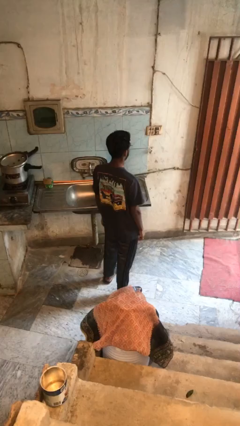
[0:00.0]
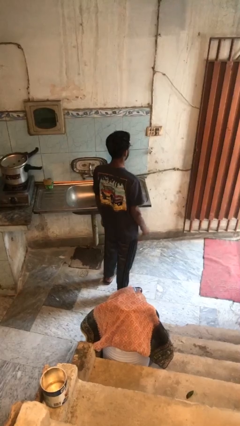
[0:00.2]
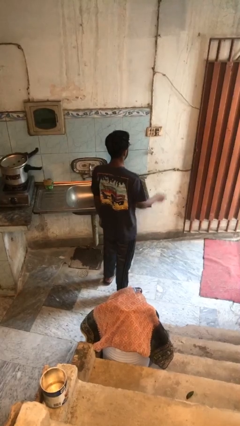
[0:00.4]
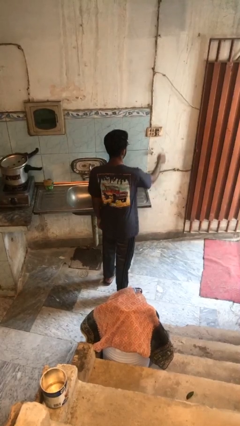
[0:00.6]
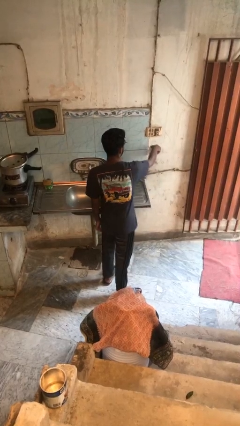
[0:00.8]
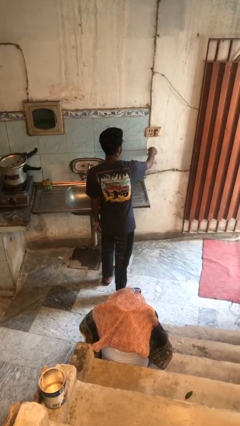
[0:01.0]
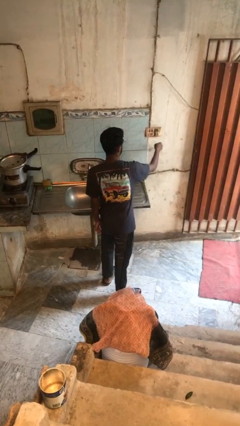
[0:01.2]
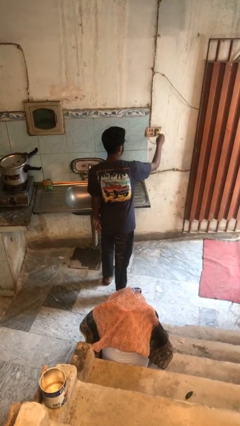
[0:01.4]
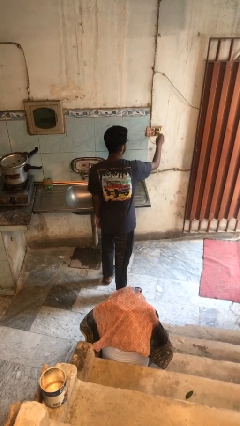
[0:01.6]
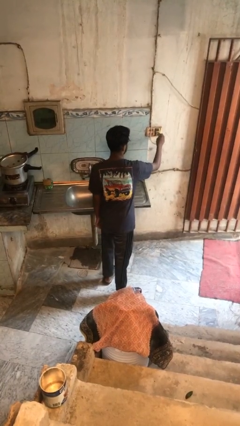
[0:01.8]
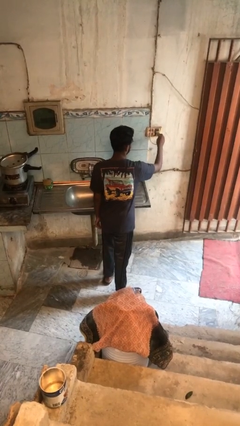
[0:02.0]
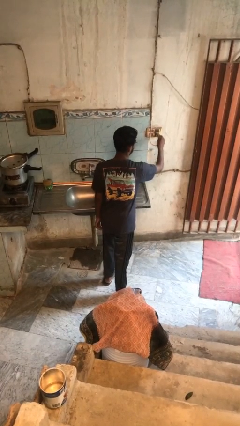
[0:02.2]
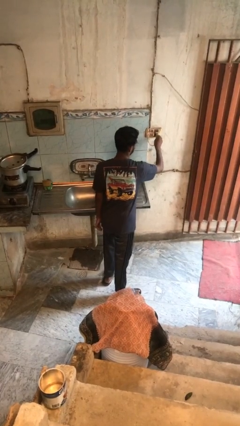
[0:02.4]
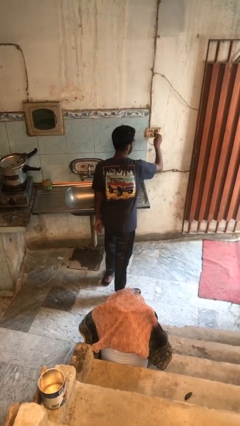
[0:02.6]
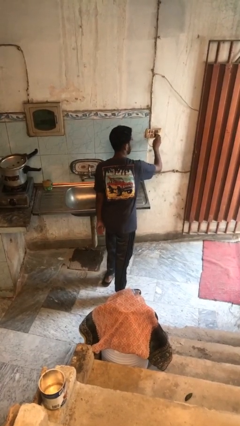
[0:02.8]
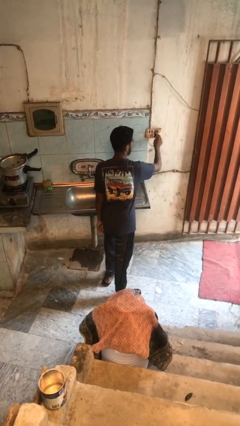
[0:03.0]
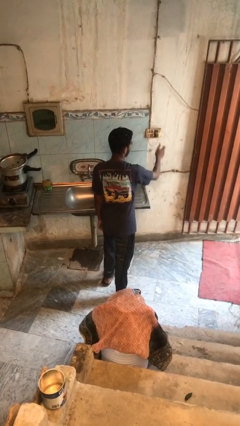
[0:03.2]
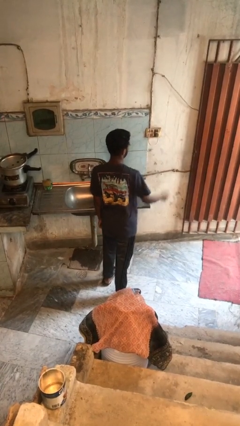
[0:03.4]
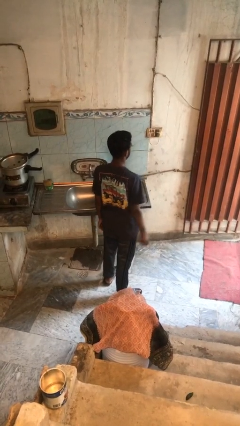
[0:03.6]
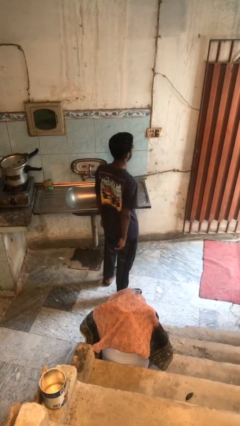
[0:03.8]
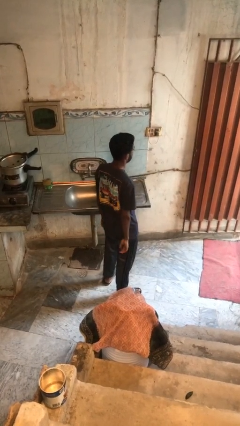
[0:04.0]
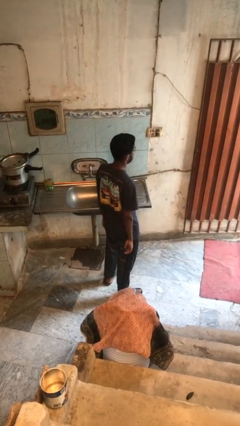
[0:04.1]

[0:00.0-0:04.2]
person plugs into electrical socket

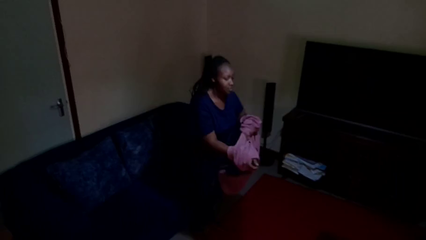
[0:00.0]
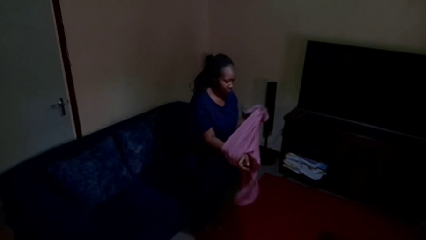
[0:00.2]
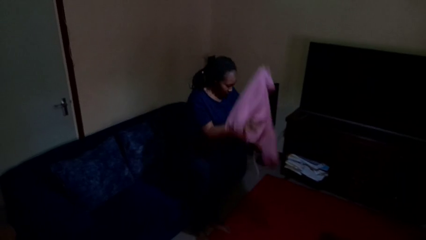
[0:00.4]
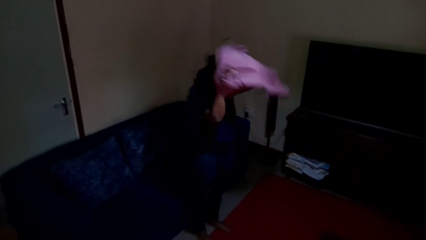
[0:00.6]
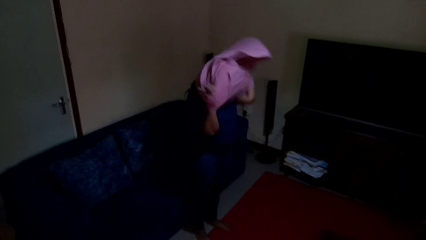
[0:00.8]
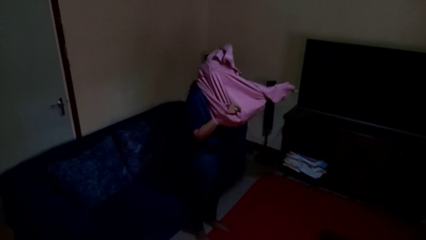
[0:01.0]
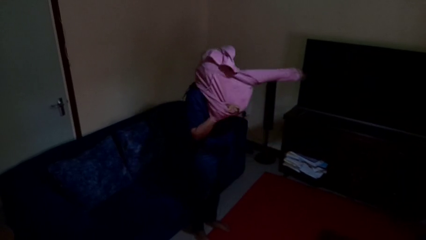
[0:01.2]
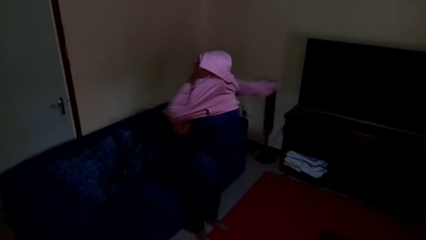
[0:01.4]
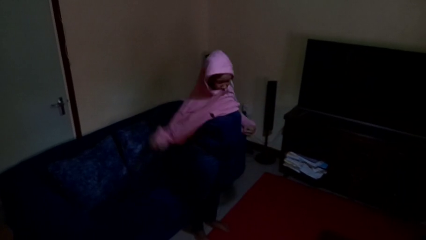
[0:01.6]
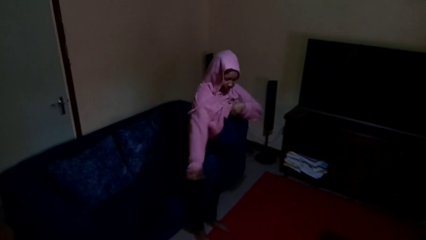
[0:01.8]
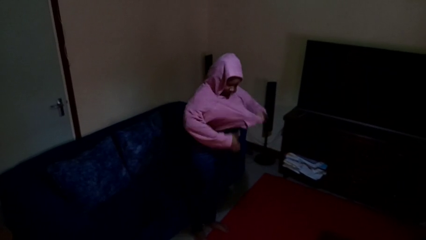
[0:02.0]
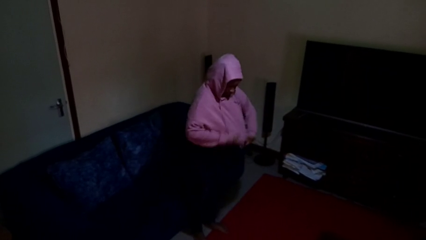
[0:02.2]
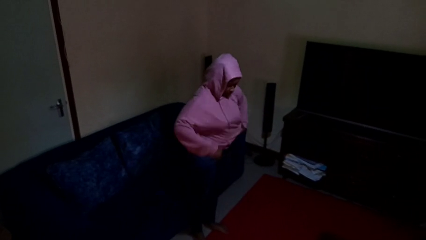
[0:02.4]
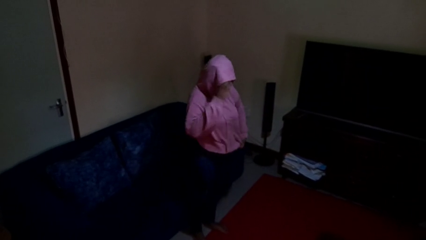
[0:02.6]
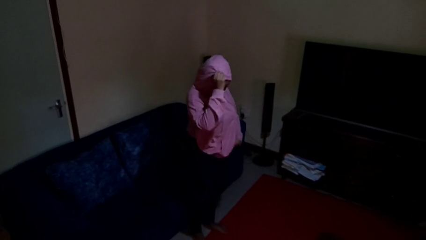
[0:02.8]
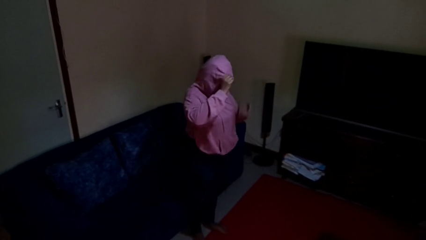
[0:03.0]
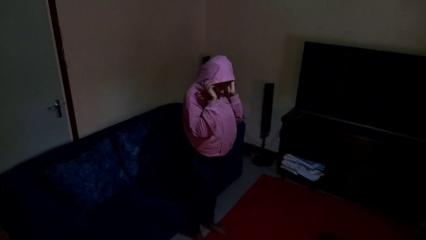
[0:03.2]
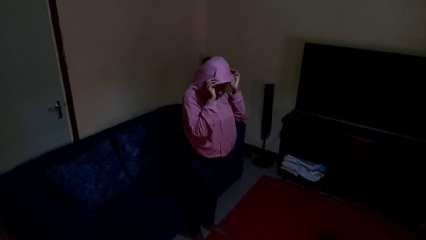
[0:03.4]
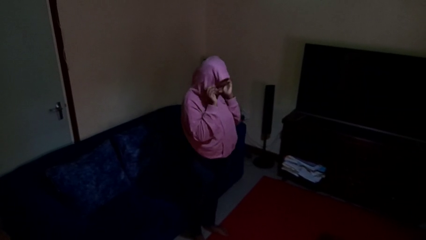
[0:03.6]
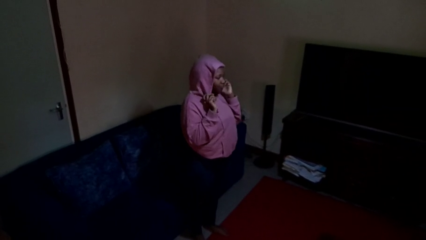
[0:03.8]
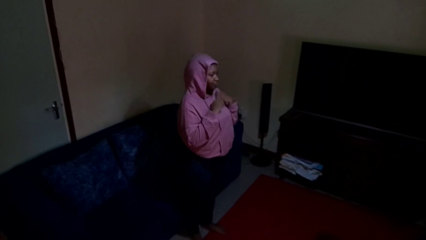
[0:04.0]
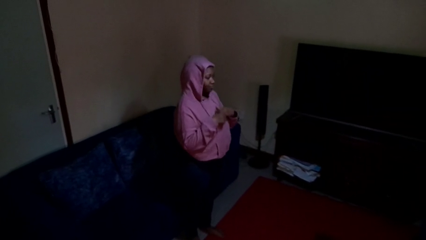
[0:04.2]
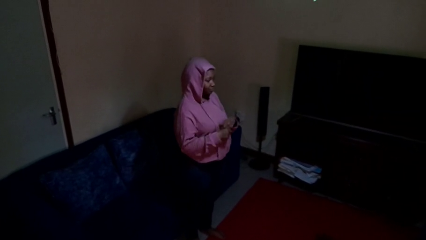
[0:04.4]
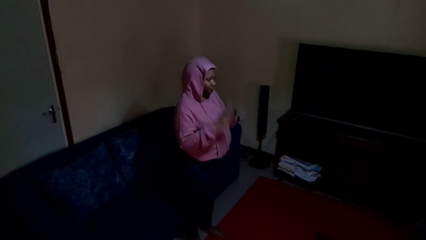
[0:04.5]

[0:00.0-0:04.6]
person puts on hoodie

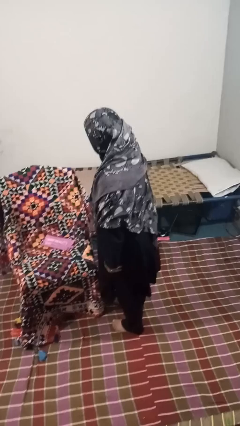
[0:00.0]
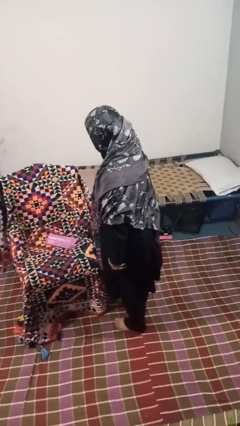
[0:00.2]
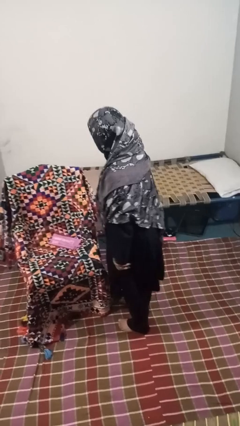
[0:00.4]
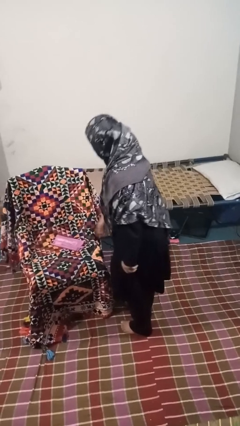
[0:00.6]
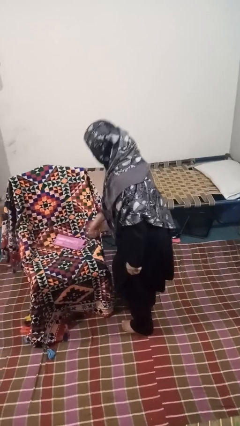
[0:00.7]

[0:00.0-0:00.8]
person puts down object on couch

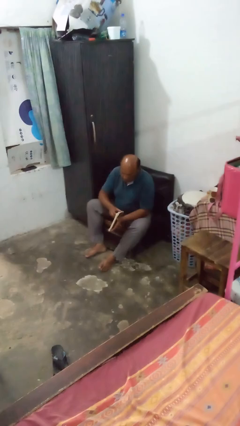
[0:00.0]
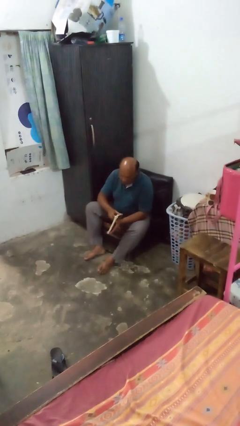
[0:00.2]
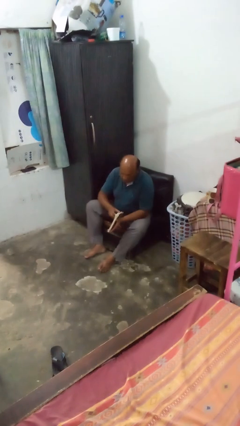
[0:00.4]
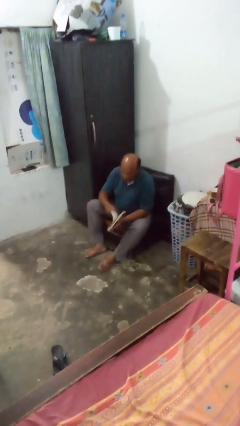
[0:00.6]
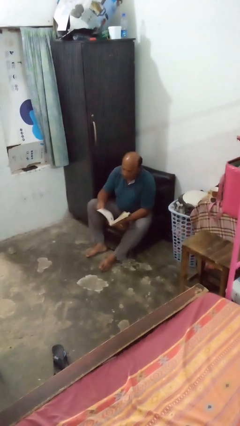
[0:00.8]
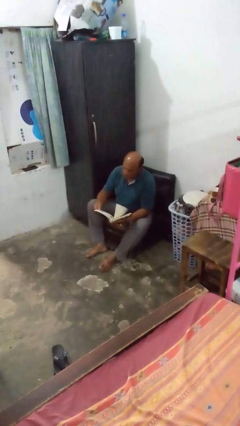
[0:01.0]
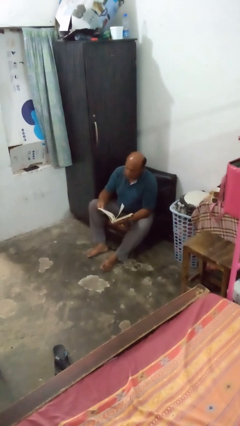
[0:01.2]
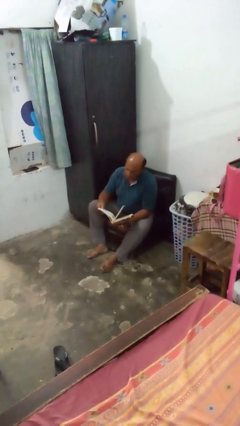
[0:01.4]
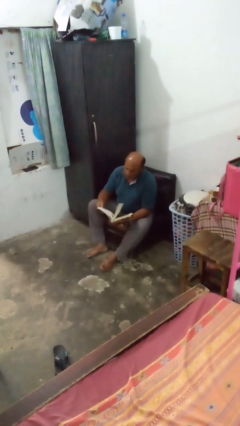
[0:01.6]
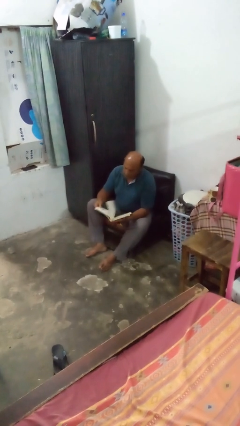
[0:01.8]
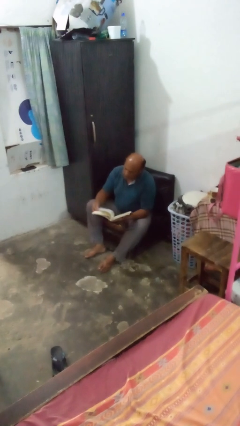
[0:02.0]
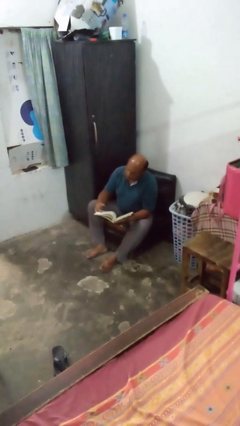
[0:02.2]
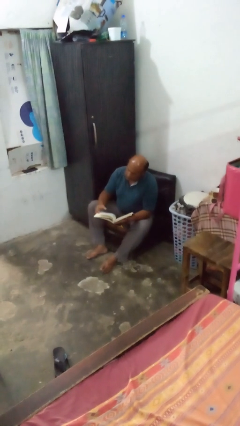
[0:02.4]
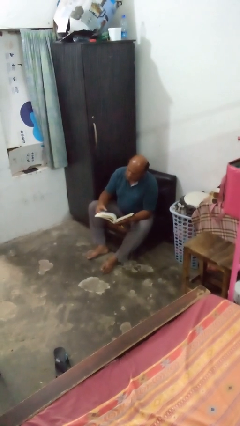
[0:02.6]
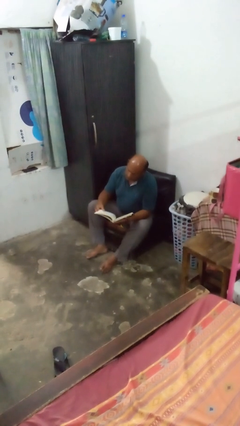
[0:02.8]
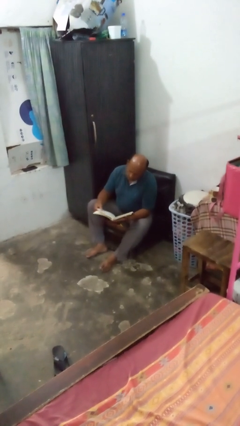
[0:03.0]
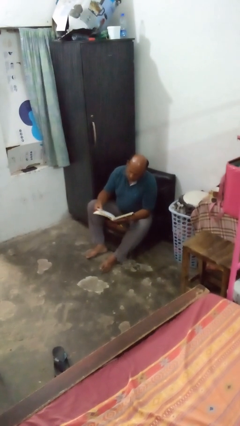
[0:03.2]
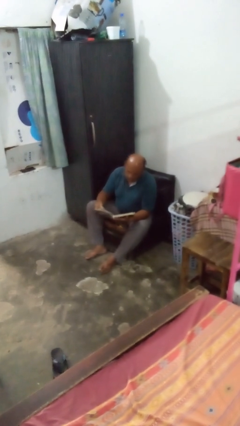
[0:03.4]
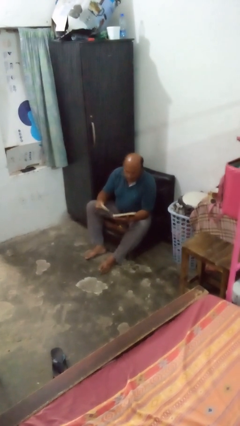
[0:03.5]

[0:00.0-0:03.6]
person reads magazine

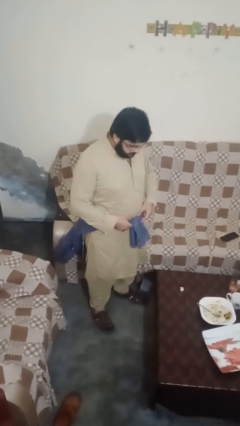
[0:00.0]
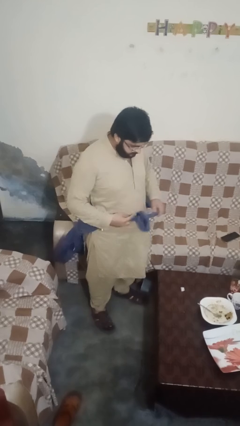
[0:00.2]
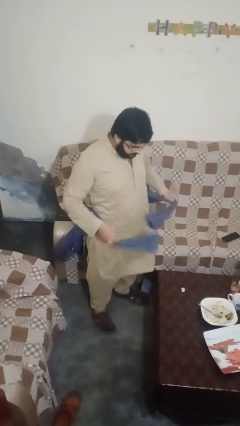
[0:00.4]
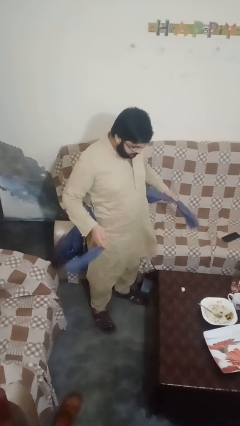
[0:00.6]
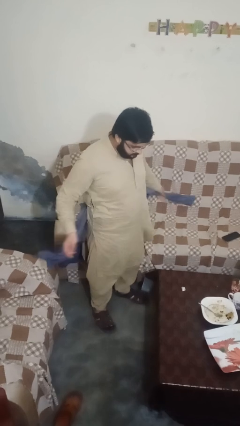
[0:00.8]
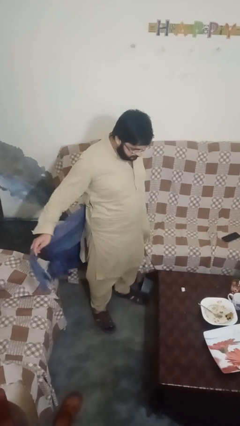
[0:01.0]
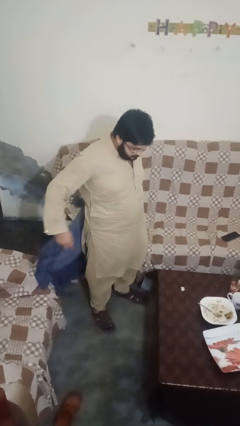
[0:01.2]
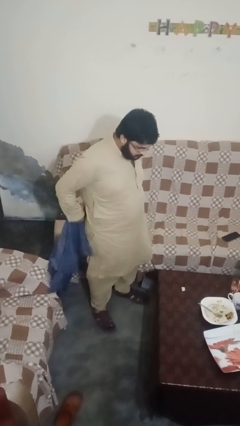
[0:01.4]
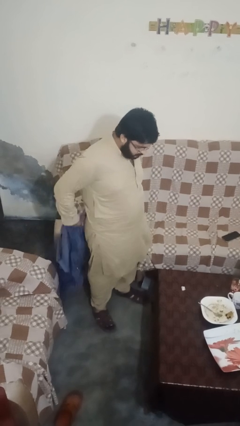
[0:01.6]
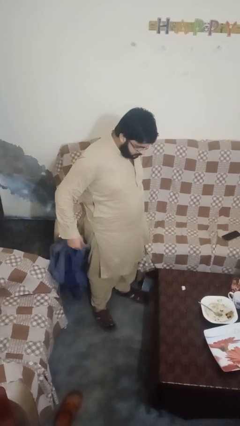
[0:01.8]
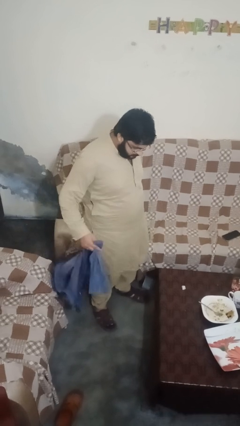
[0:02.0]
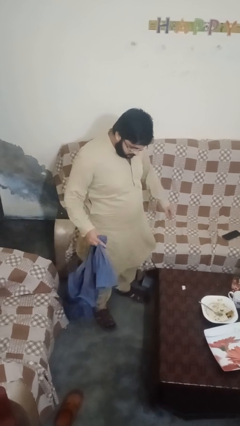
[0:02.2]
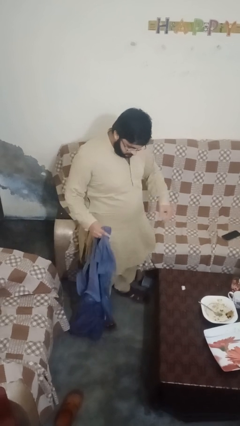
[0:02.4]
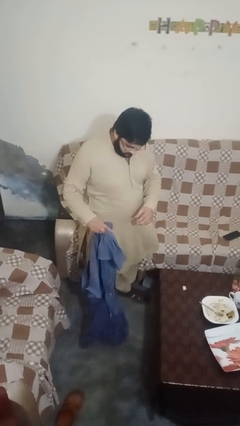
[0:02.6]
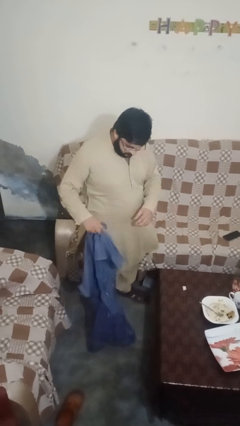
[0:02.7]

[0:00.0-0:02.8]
person unties jacket around waist

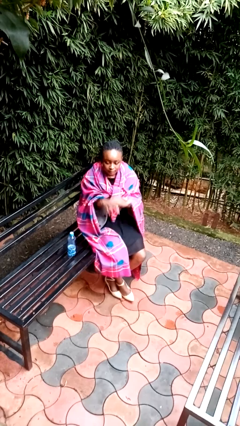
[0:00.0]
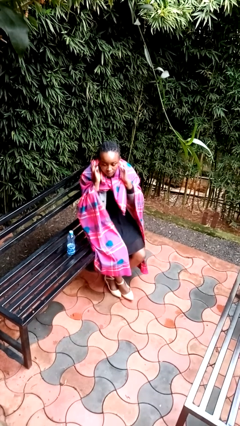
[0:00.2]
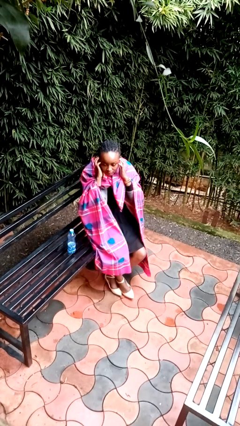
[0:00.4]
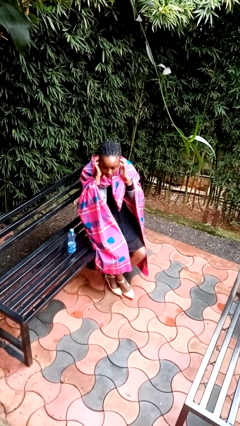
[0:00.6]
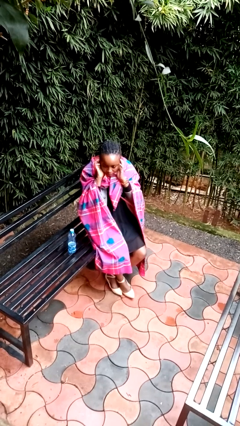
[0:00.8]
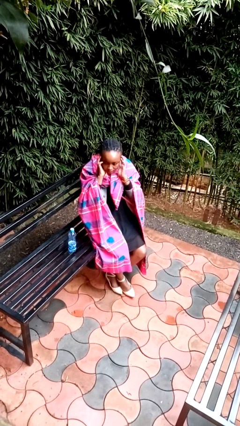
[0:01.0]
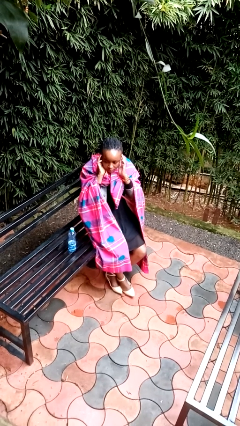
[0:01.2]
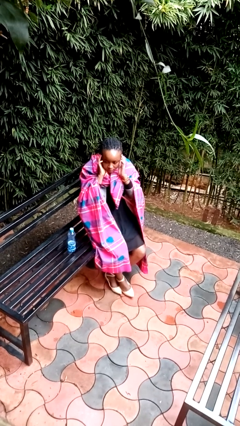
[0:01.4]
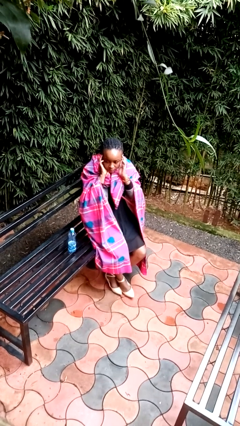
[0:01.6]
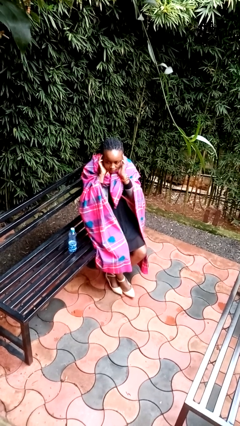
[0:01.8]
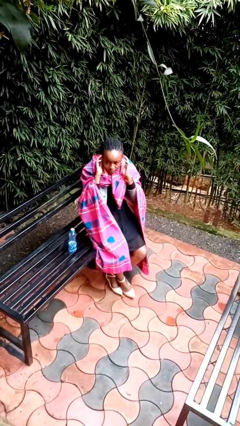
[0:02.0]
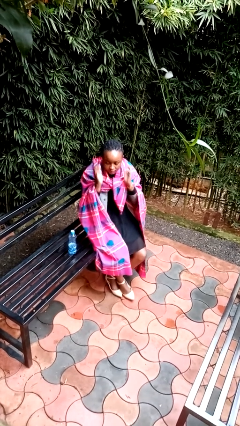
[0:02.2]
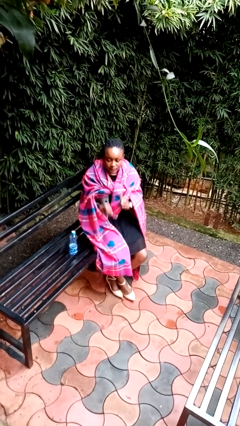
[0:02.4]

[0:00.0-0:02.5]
person puts fingers in ear
